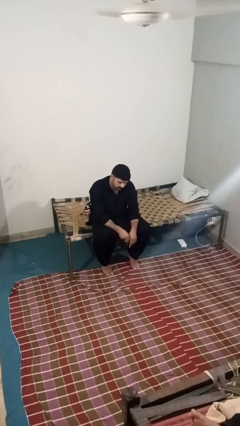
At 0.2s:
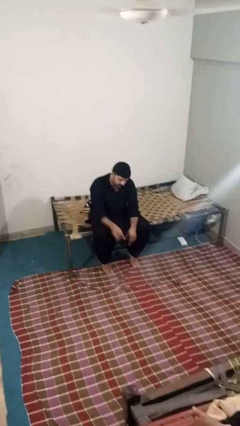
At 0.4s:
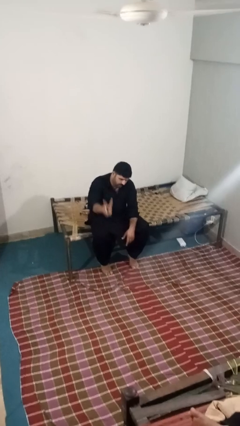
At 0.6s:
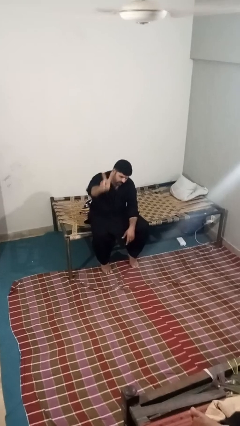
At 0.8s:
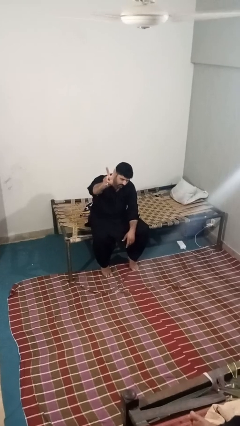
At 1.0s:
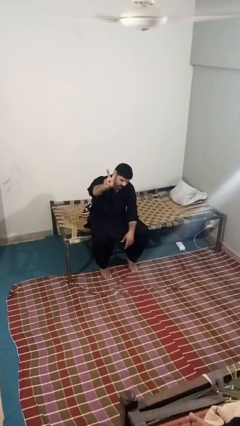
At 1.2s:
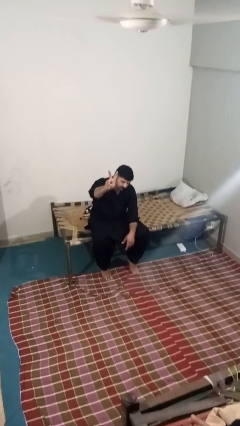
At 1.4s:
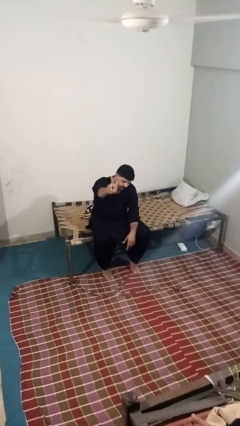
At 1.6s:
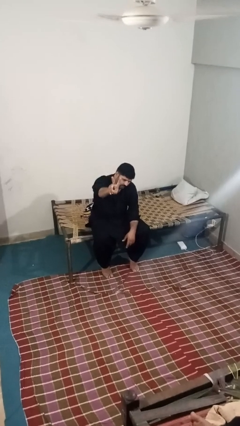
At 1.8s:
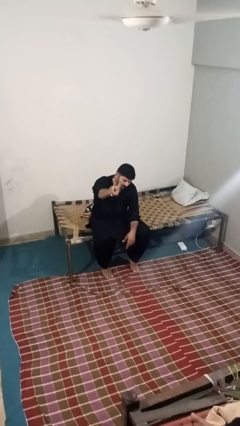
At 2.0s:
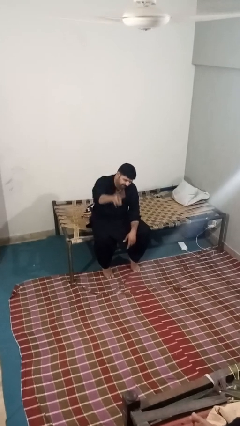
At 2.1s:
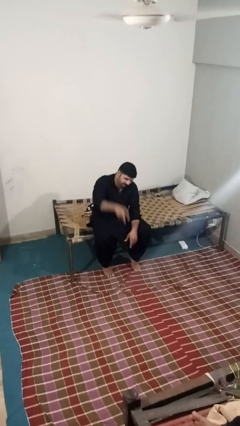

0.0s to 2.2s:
person gestures peace

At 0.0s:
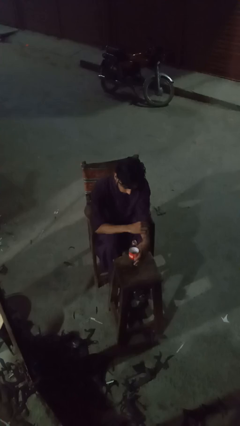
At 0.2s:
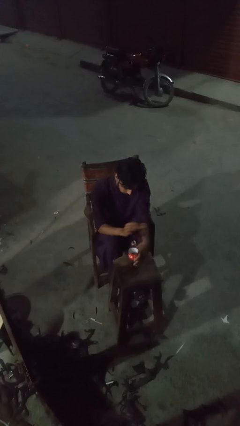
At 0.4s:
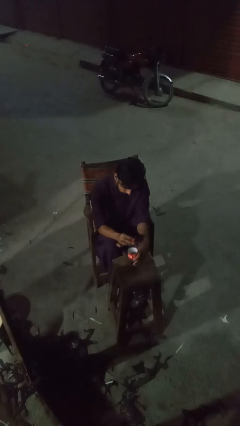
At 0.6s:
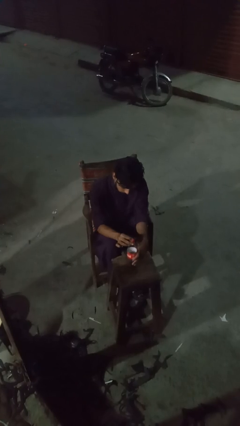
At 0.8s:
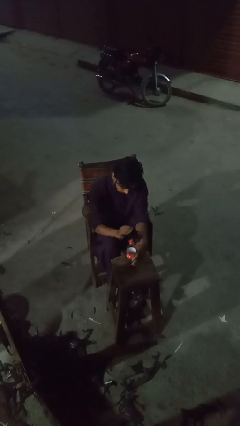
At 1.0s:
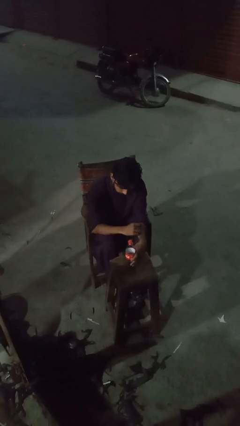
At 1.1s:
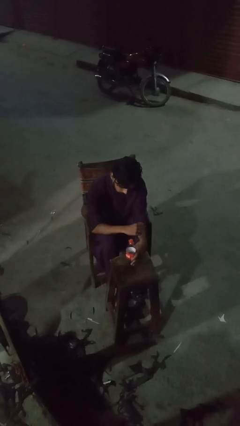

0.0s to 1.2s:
person screws lid to bottle

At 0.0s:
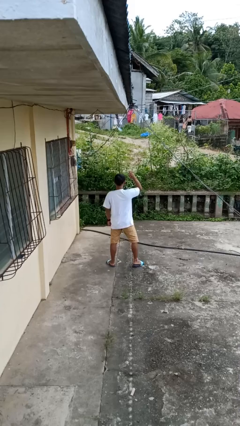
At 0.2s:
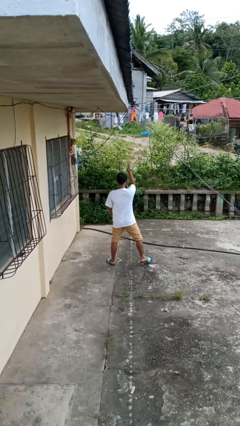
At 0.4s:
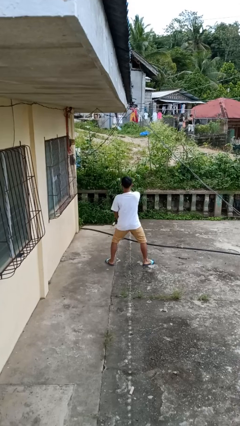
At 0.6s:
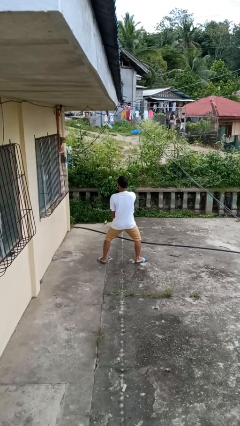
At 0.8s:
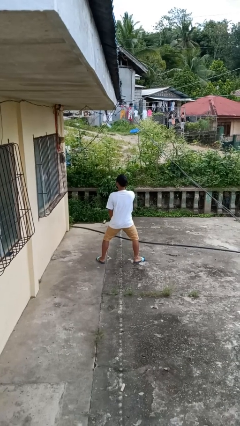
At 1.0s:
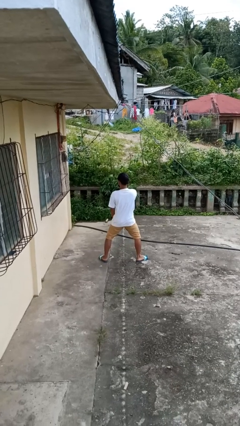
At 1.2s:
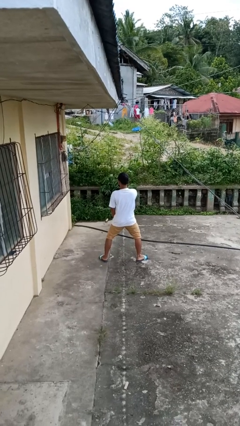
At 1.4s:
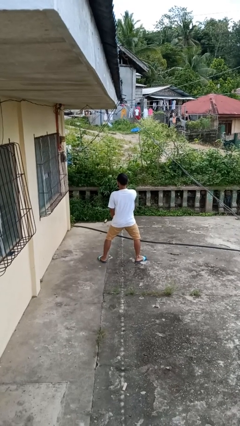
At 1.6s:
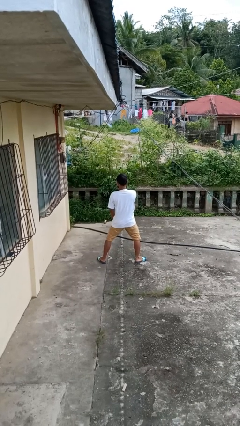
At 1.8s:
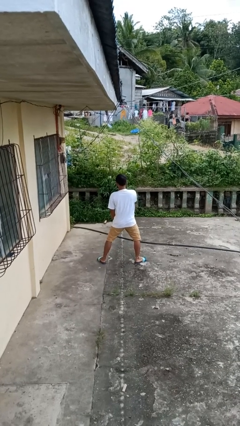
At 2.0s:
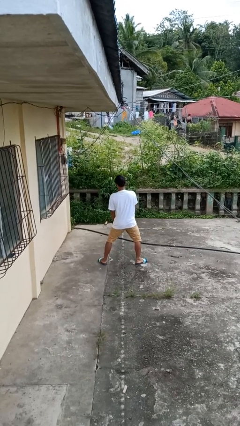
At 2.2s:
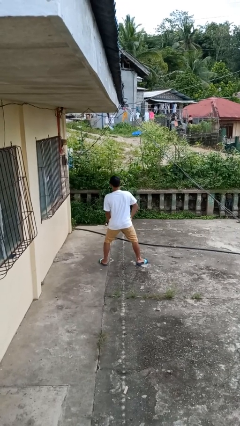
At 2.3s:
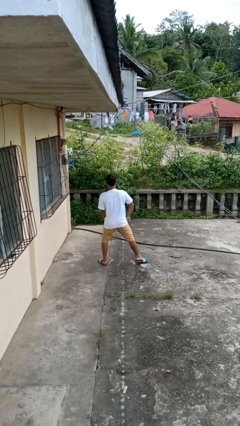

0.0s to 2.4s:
person karate chop

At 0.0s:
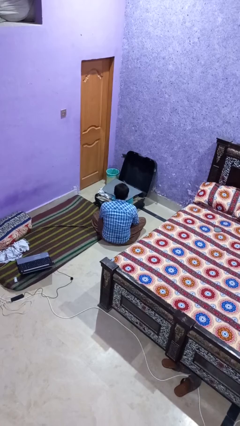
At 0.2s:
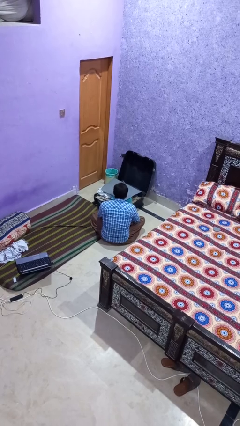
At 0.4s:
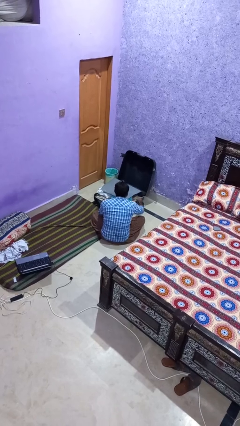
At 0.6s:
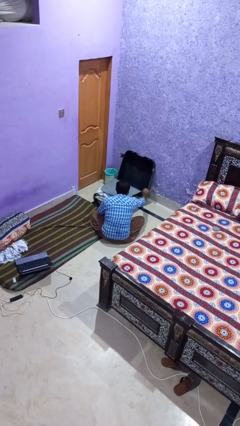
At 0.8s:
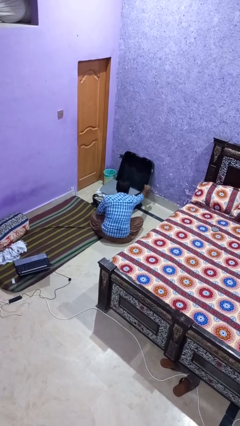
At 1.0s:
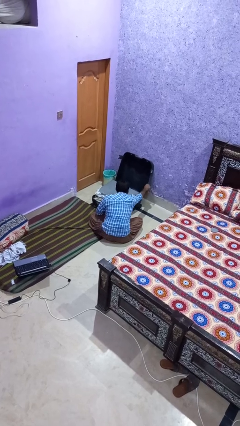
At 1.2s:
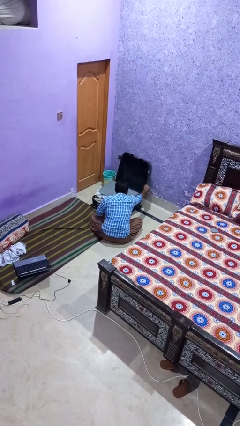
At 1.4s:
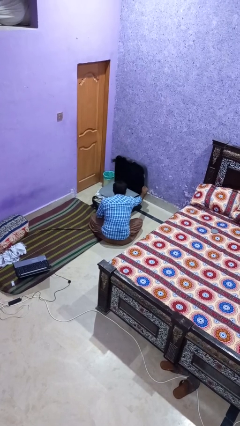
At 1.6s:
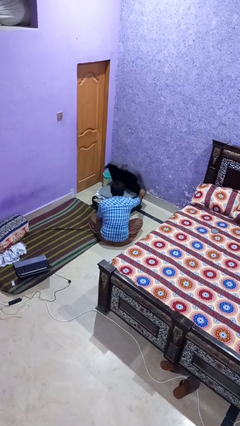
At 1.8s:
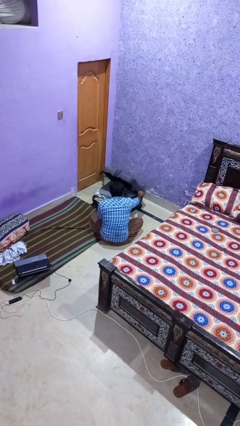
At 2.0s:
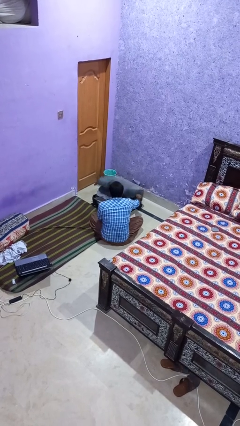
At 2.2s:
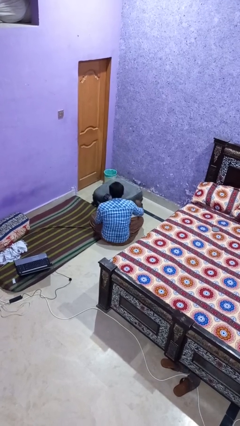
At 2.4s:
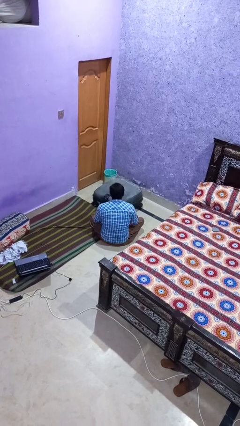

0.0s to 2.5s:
person closes suitcase

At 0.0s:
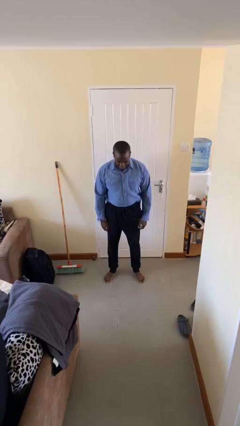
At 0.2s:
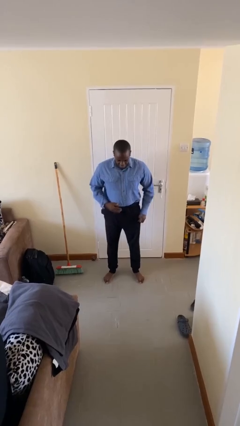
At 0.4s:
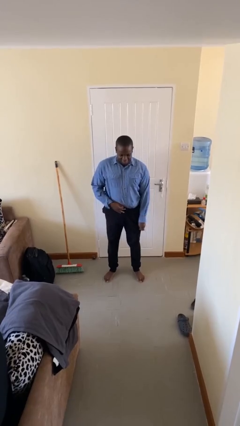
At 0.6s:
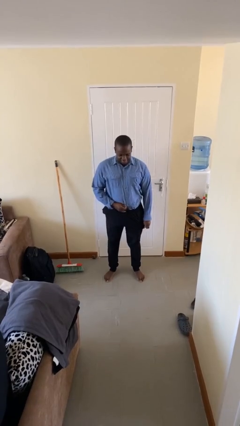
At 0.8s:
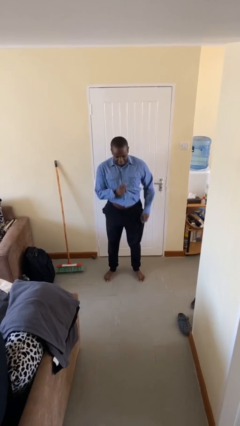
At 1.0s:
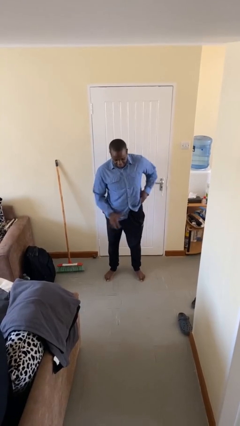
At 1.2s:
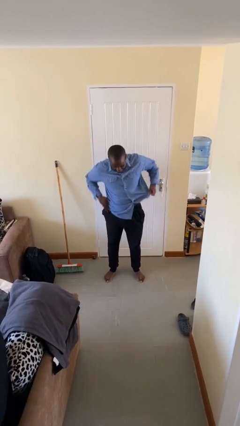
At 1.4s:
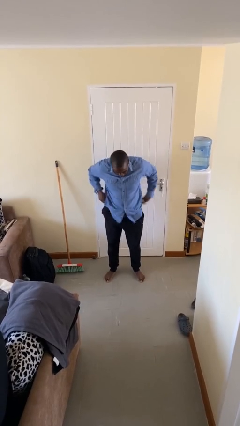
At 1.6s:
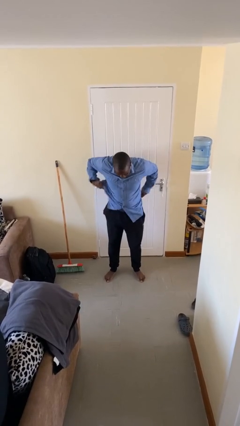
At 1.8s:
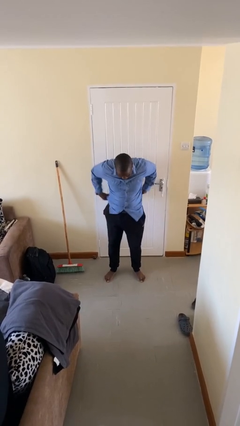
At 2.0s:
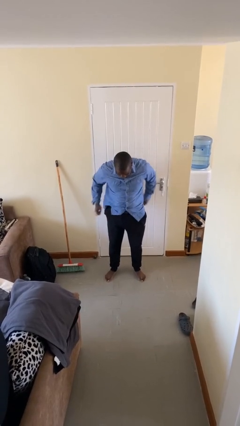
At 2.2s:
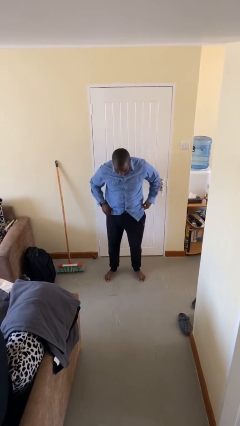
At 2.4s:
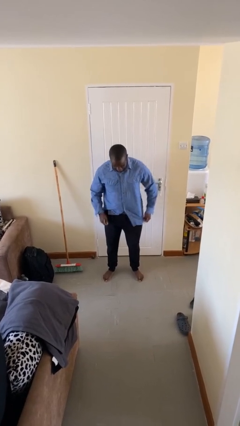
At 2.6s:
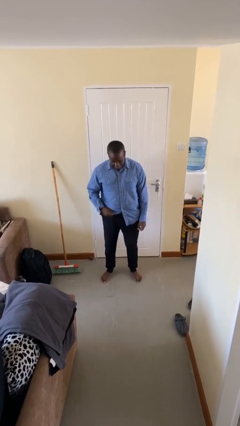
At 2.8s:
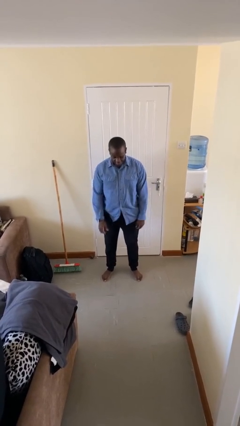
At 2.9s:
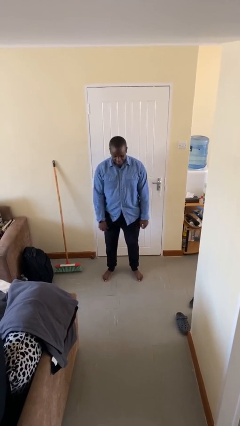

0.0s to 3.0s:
person untucks shirt

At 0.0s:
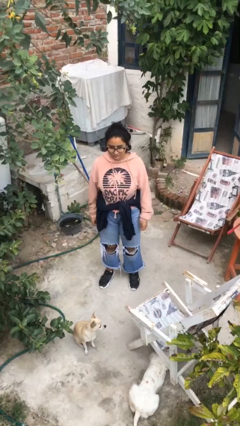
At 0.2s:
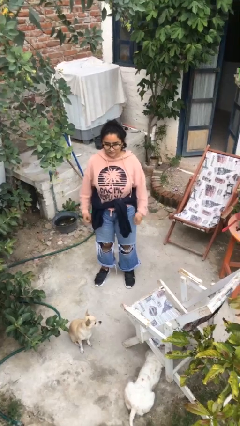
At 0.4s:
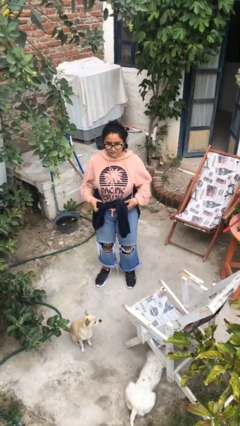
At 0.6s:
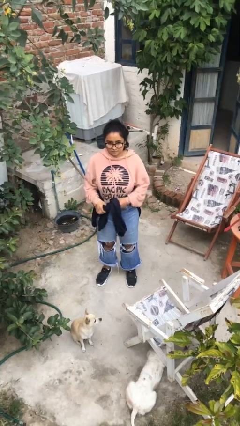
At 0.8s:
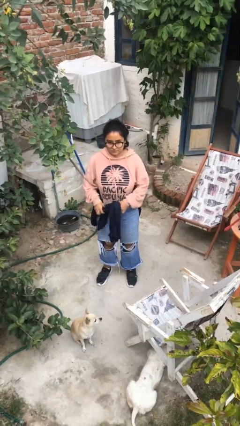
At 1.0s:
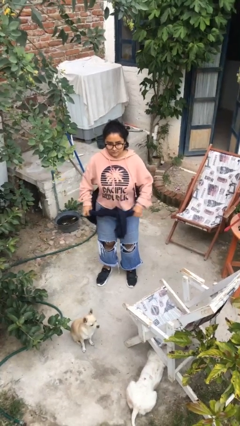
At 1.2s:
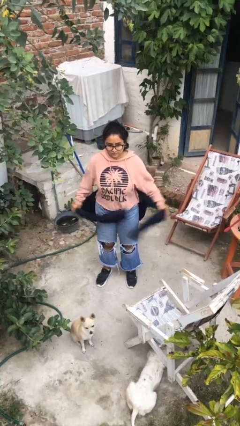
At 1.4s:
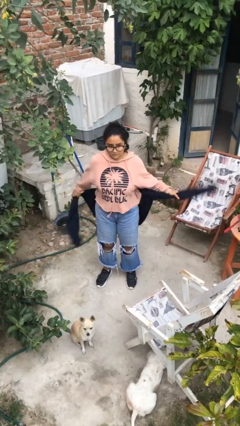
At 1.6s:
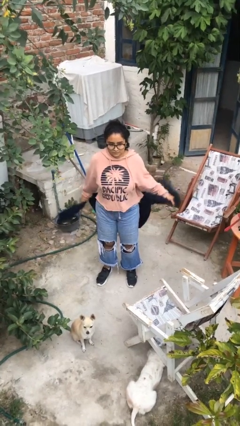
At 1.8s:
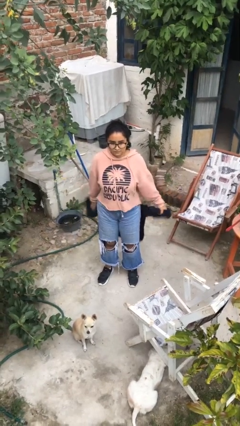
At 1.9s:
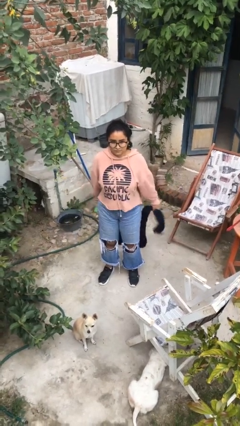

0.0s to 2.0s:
person unties jacket around waist

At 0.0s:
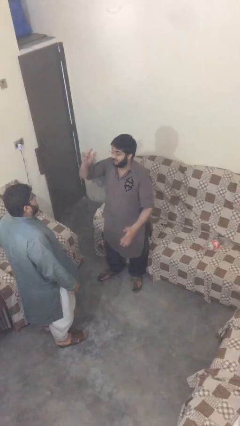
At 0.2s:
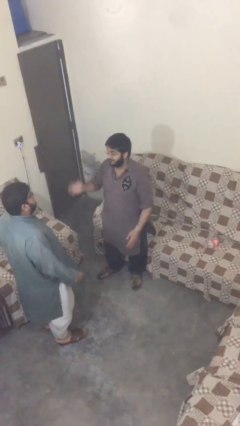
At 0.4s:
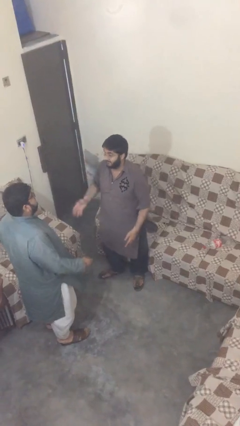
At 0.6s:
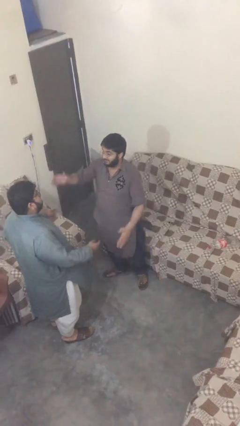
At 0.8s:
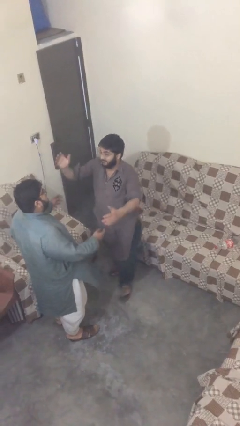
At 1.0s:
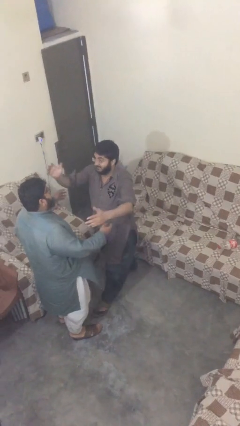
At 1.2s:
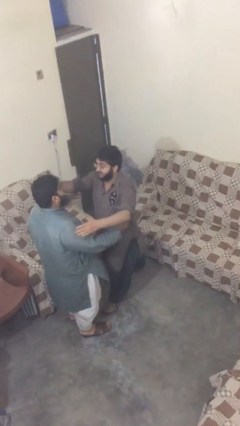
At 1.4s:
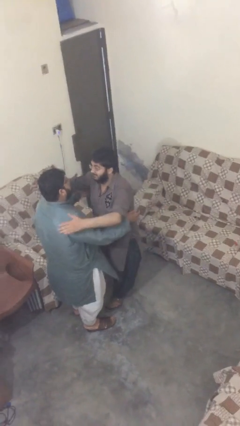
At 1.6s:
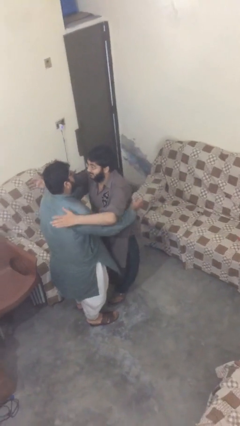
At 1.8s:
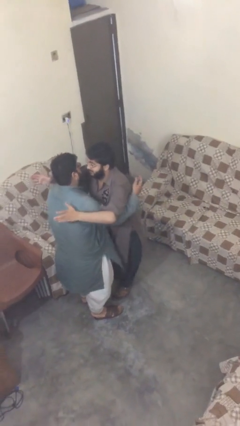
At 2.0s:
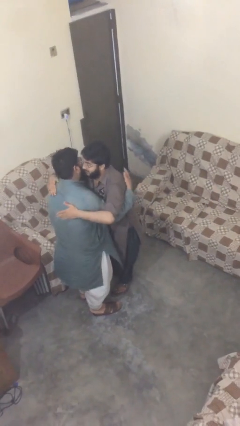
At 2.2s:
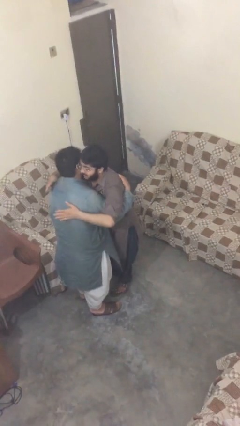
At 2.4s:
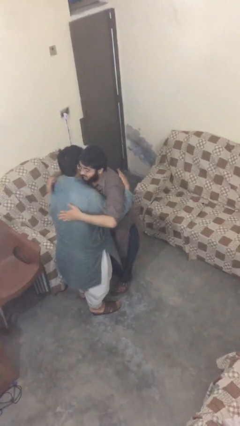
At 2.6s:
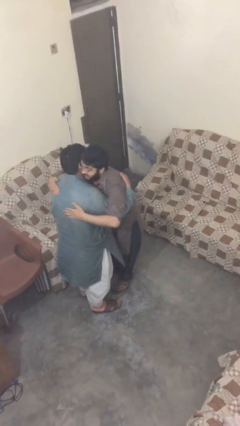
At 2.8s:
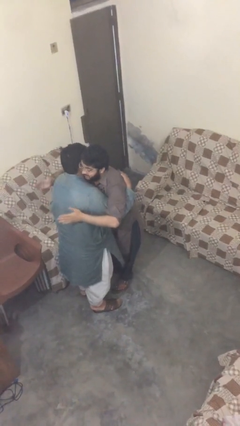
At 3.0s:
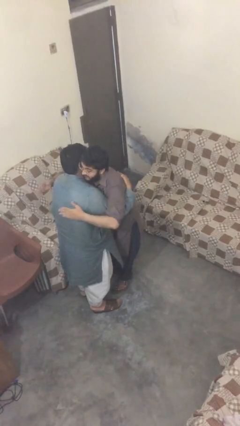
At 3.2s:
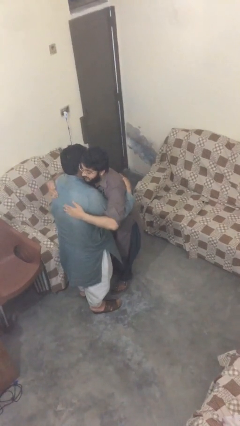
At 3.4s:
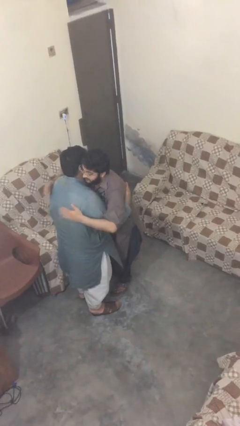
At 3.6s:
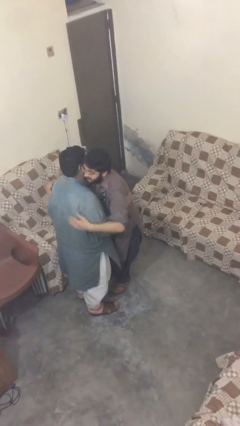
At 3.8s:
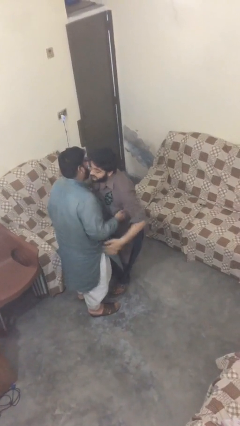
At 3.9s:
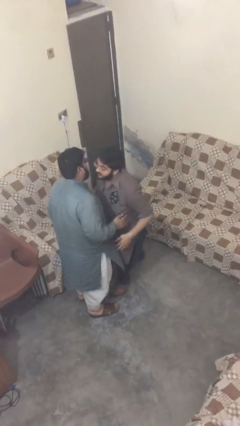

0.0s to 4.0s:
person embraces person
